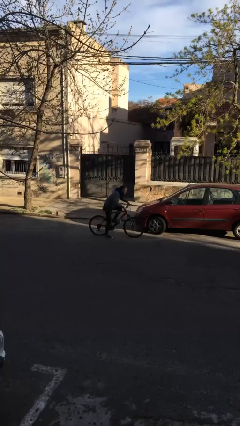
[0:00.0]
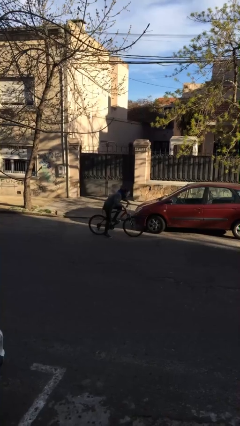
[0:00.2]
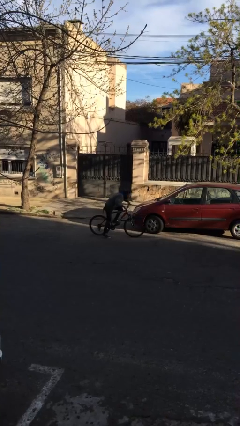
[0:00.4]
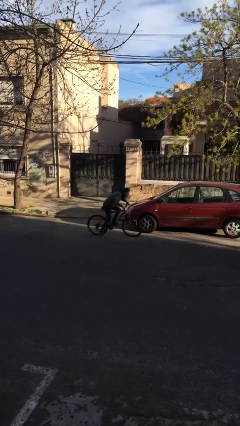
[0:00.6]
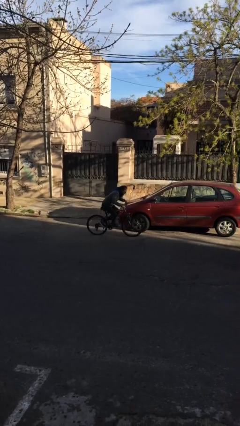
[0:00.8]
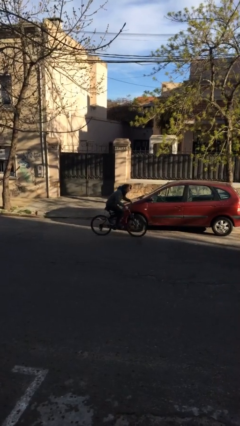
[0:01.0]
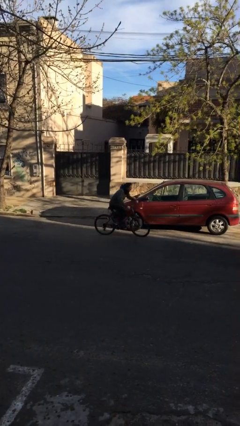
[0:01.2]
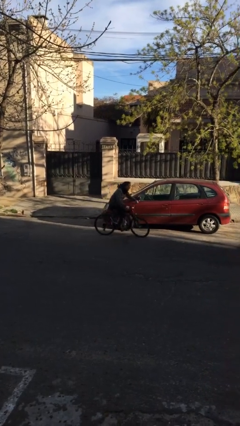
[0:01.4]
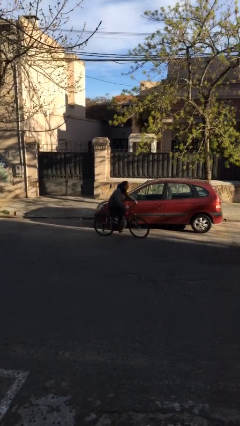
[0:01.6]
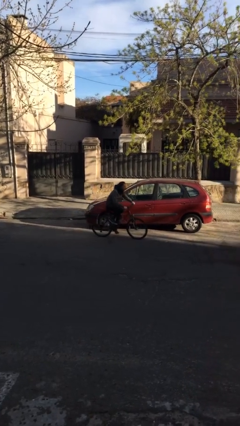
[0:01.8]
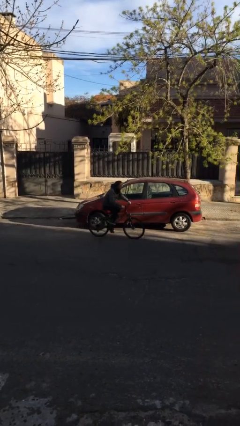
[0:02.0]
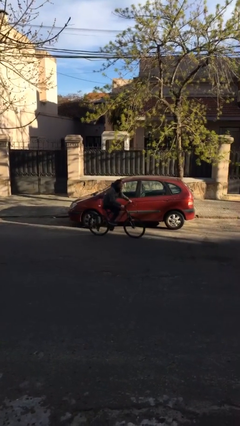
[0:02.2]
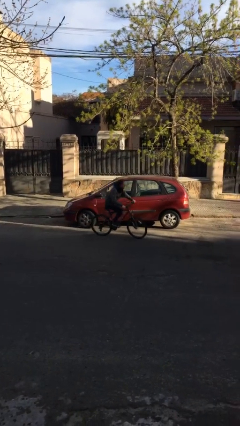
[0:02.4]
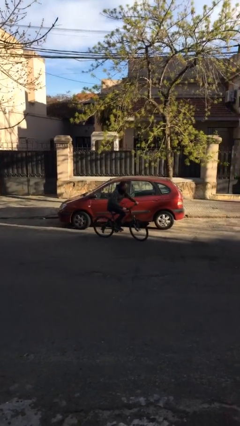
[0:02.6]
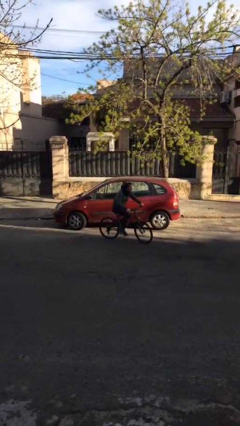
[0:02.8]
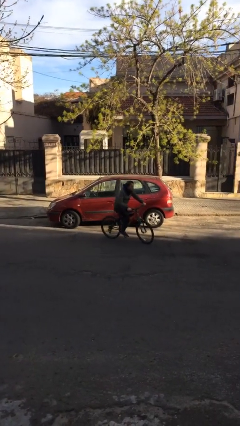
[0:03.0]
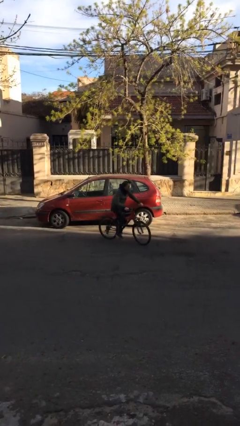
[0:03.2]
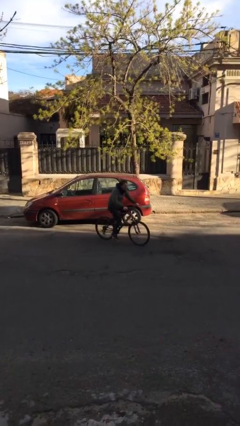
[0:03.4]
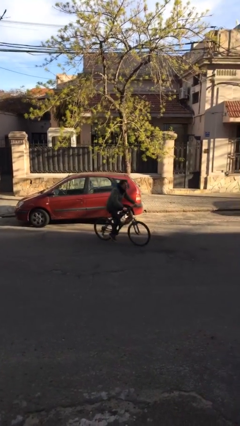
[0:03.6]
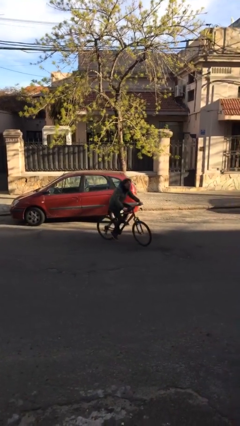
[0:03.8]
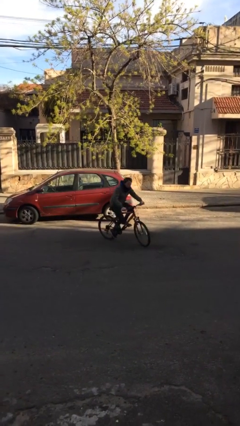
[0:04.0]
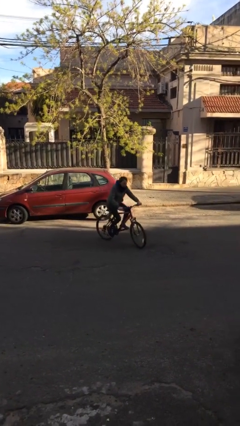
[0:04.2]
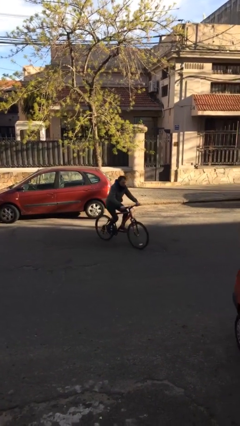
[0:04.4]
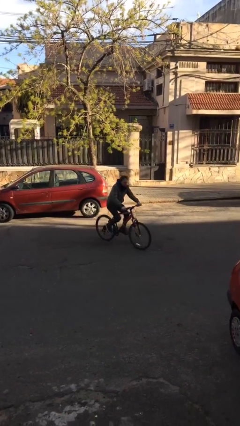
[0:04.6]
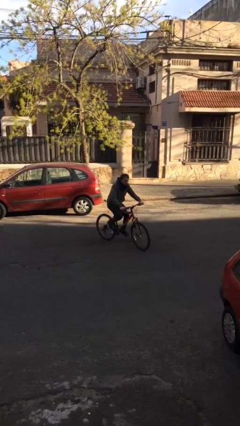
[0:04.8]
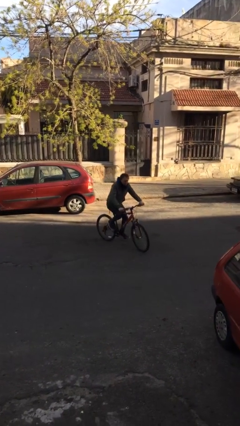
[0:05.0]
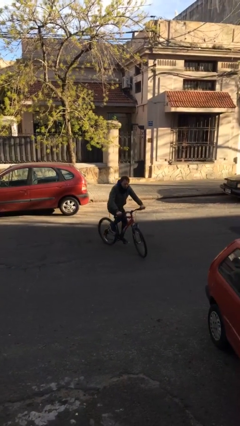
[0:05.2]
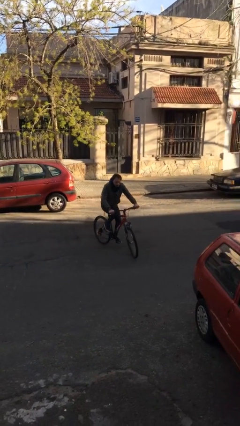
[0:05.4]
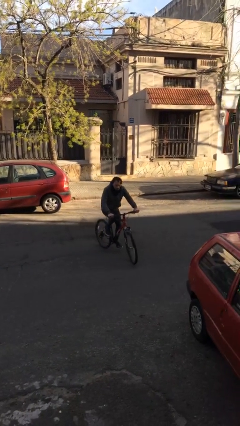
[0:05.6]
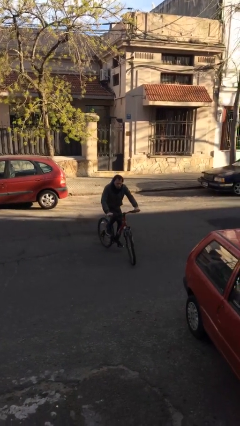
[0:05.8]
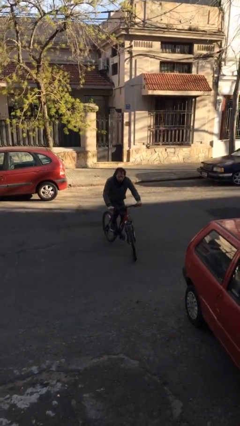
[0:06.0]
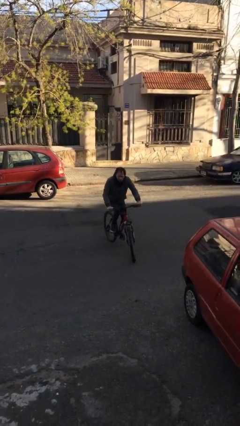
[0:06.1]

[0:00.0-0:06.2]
person rides bicycle

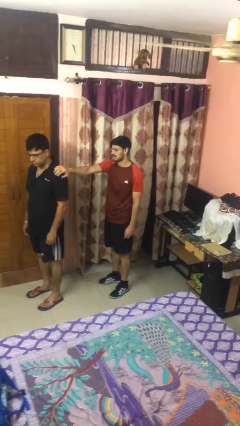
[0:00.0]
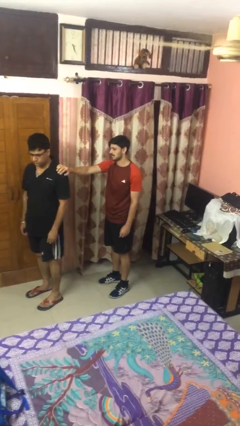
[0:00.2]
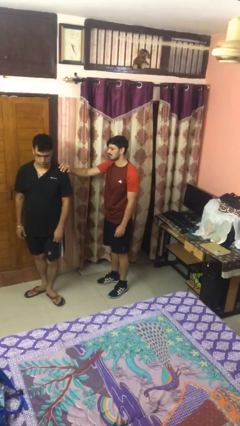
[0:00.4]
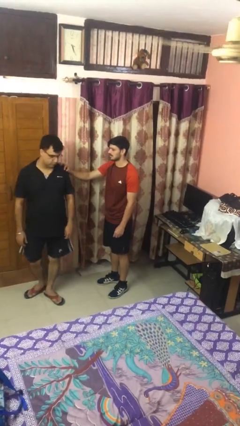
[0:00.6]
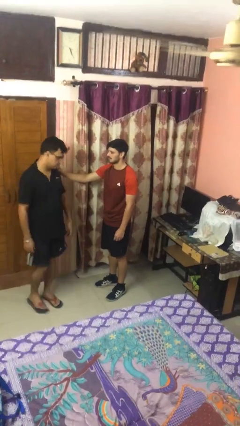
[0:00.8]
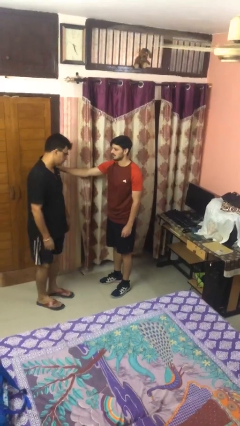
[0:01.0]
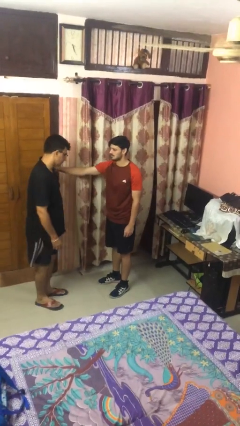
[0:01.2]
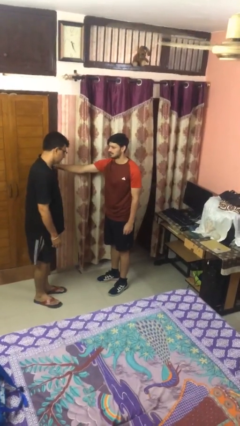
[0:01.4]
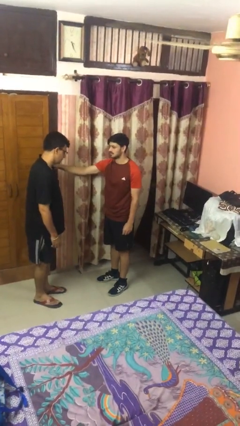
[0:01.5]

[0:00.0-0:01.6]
person spins person around

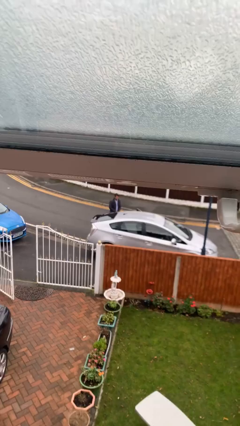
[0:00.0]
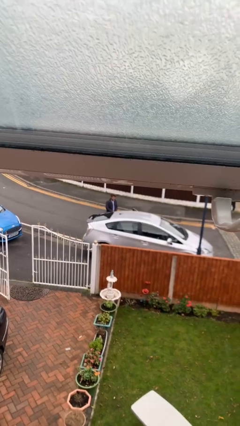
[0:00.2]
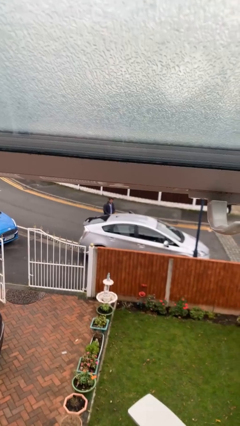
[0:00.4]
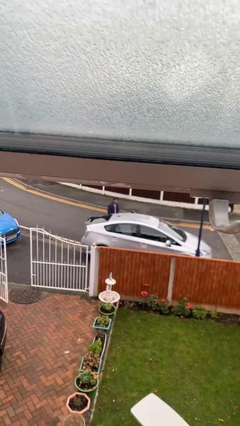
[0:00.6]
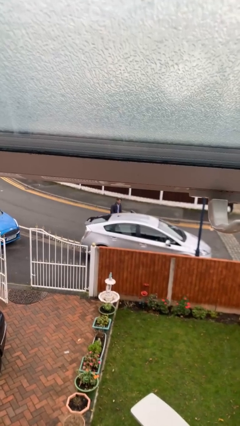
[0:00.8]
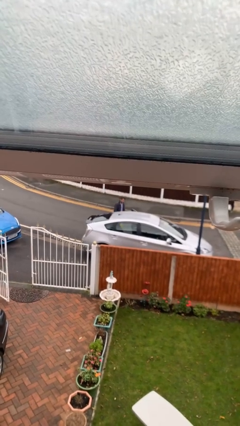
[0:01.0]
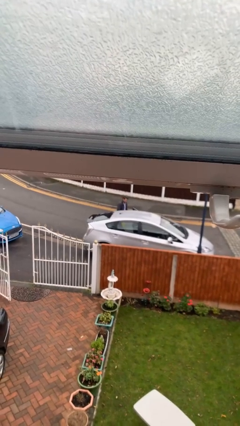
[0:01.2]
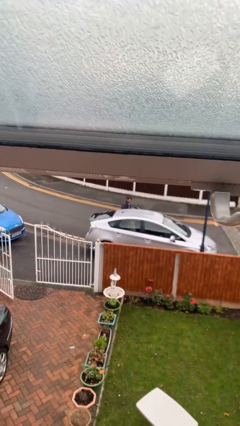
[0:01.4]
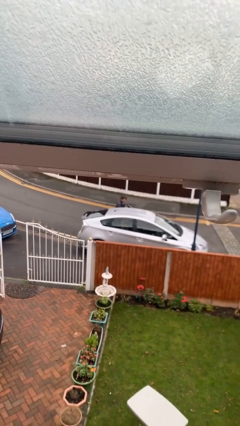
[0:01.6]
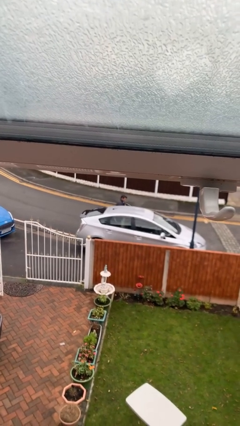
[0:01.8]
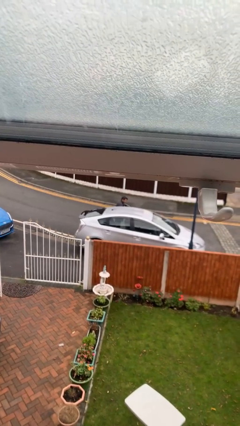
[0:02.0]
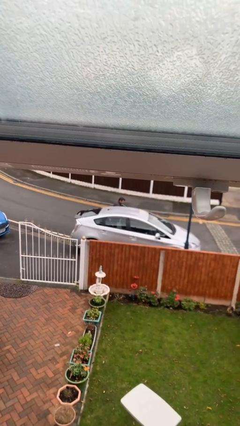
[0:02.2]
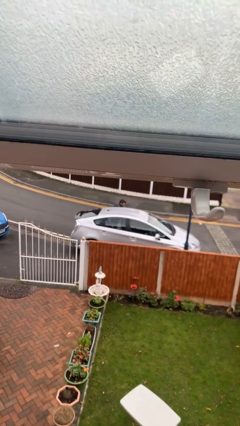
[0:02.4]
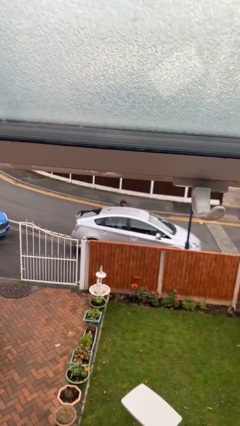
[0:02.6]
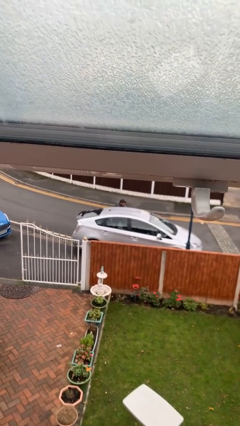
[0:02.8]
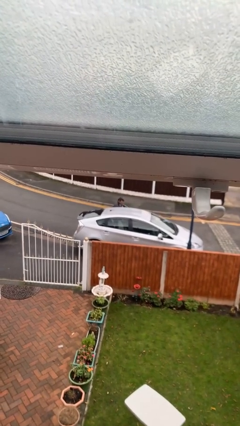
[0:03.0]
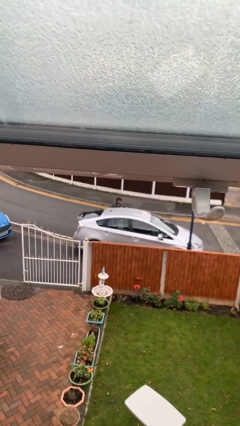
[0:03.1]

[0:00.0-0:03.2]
person loads car

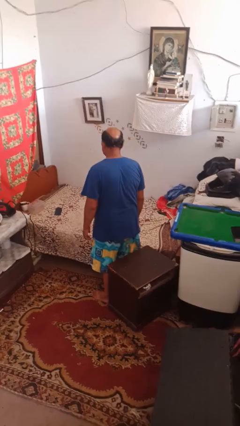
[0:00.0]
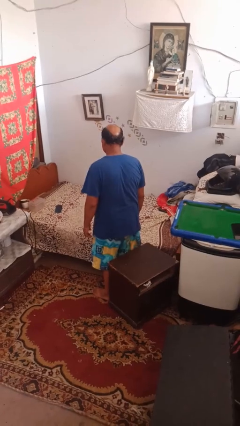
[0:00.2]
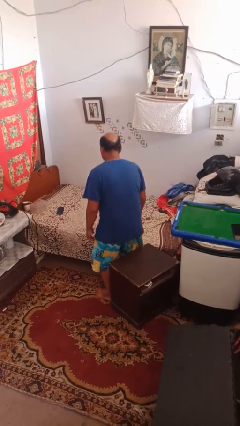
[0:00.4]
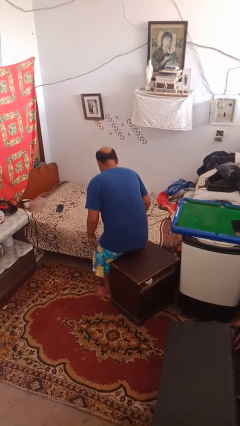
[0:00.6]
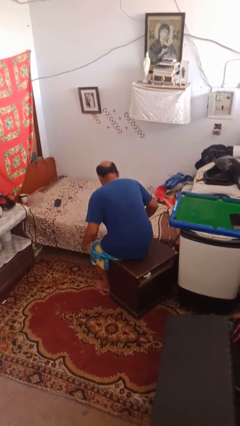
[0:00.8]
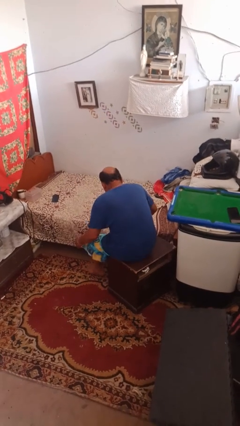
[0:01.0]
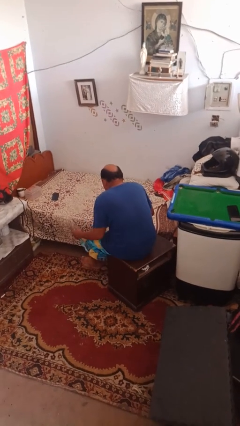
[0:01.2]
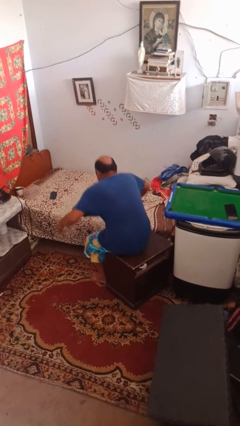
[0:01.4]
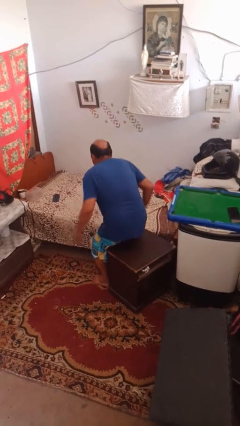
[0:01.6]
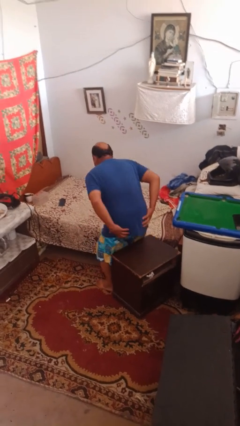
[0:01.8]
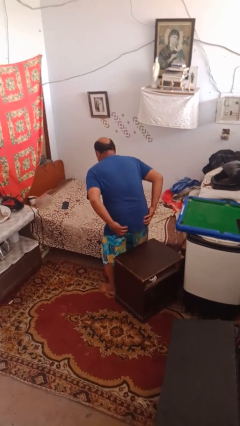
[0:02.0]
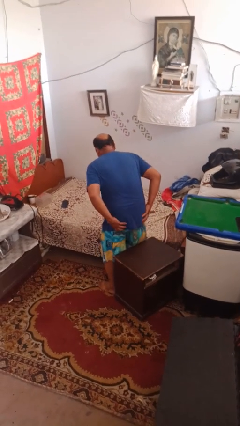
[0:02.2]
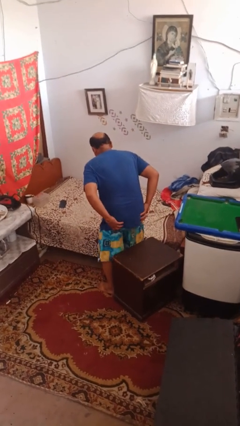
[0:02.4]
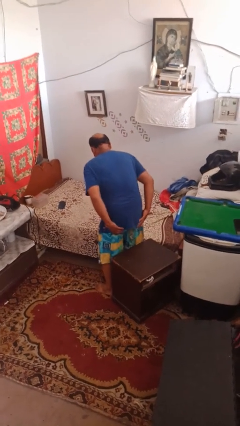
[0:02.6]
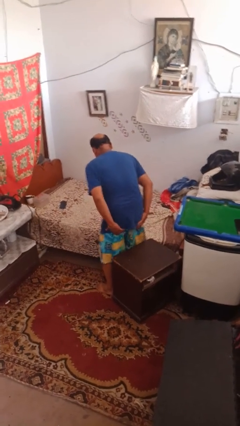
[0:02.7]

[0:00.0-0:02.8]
person bumps into table

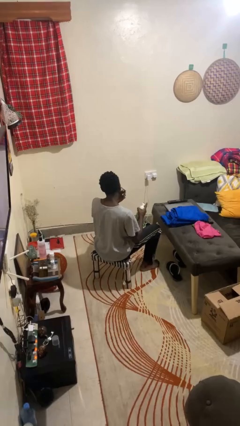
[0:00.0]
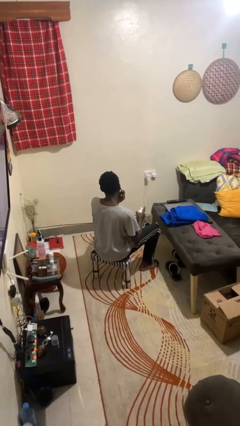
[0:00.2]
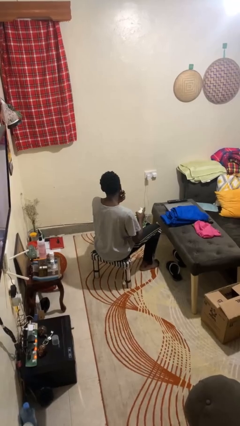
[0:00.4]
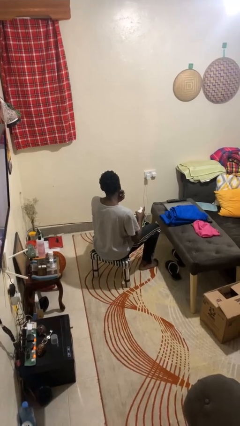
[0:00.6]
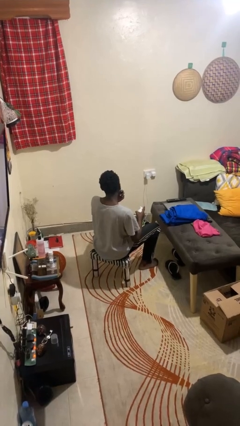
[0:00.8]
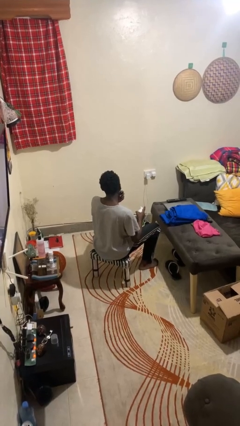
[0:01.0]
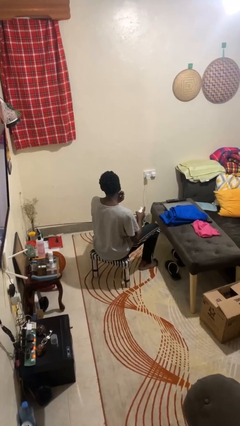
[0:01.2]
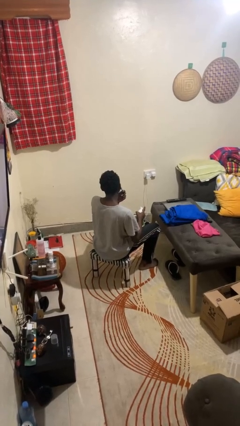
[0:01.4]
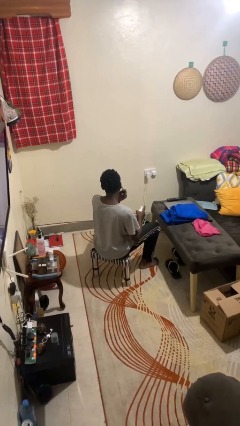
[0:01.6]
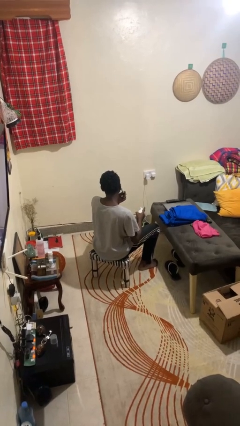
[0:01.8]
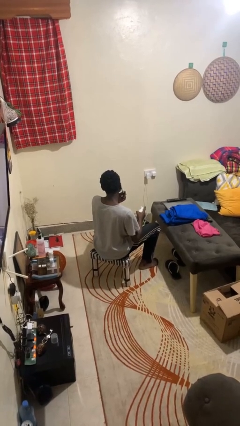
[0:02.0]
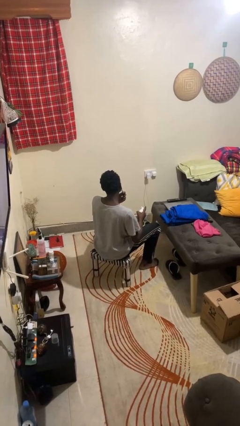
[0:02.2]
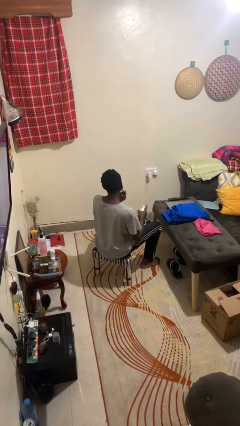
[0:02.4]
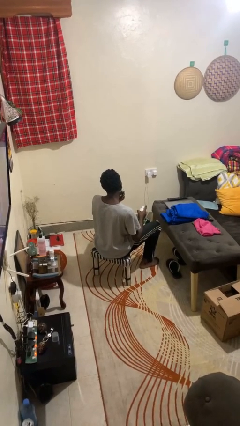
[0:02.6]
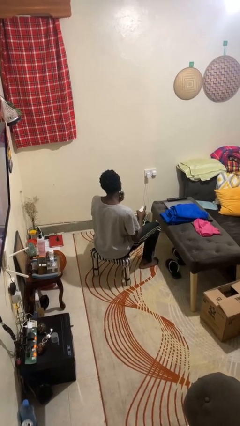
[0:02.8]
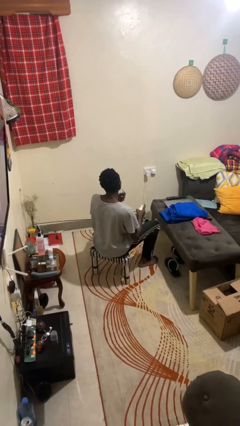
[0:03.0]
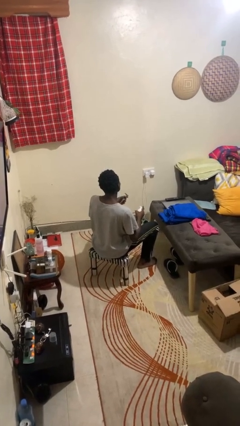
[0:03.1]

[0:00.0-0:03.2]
person shaves face

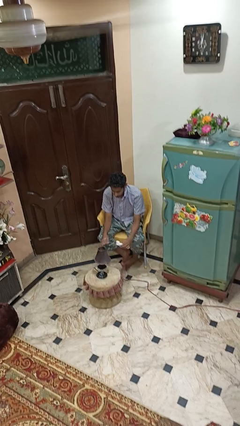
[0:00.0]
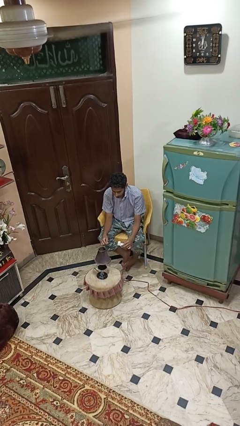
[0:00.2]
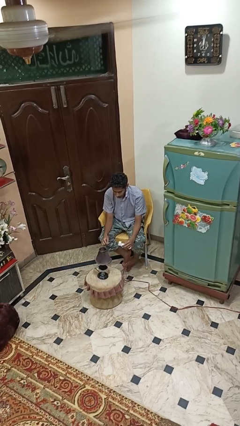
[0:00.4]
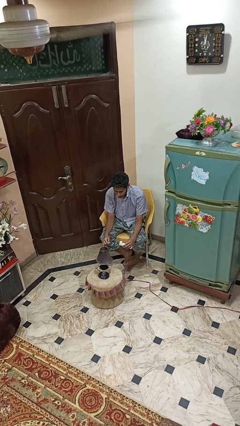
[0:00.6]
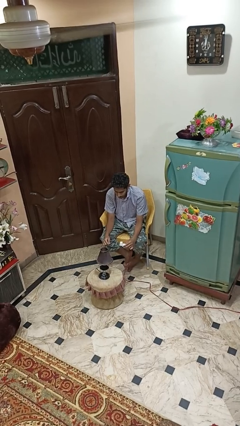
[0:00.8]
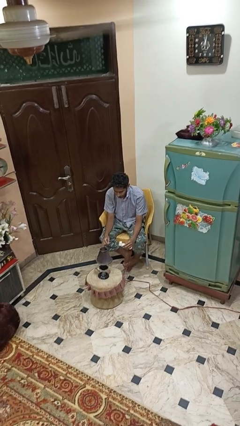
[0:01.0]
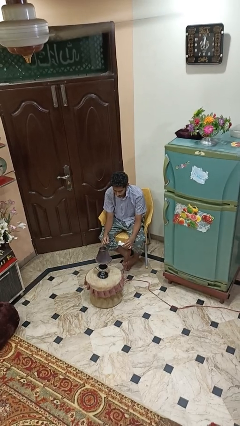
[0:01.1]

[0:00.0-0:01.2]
person turns off lamp
